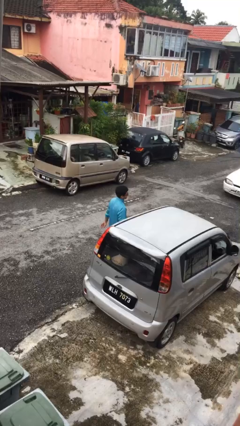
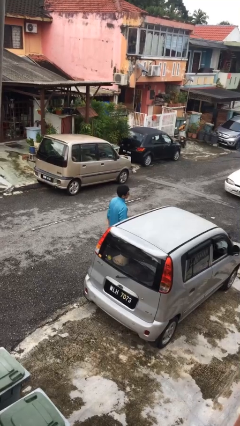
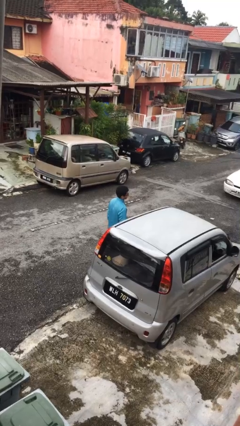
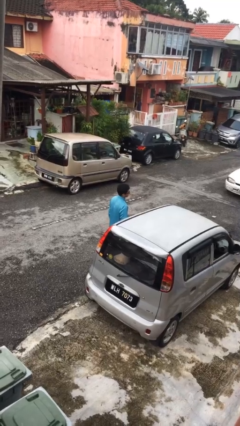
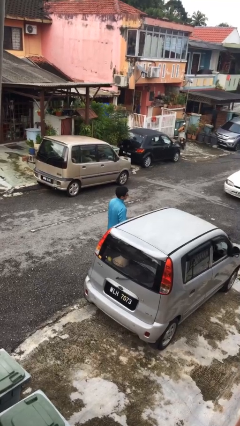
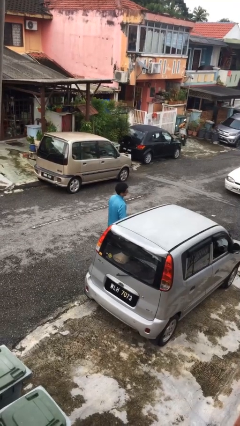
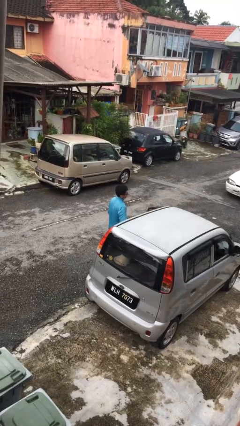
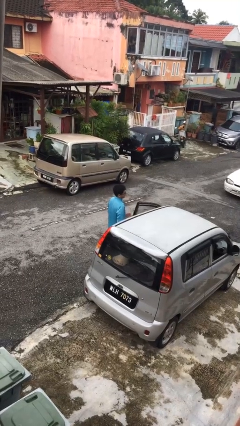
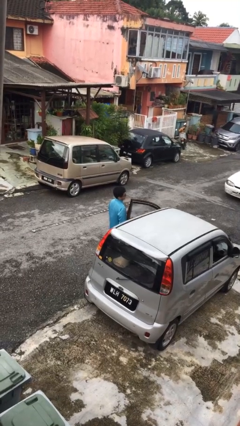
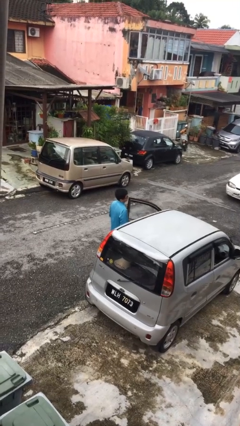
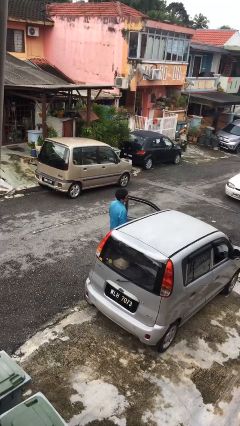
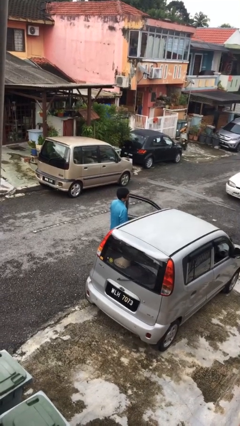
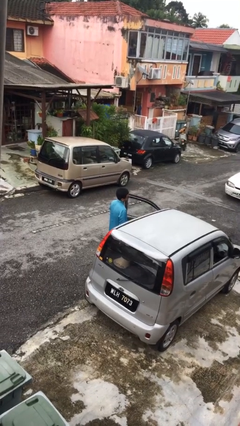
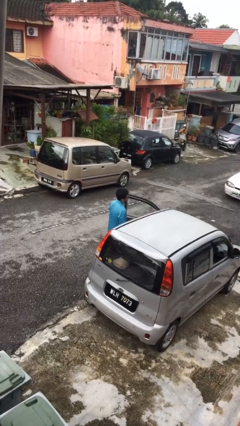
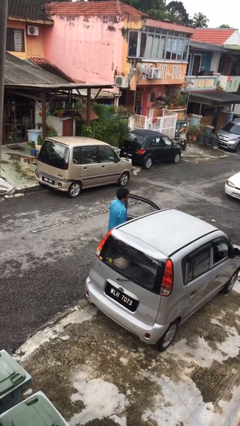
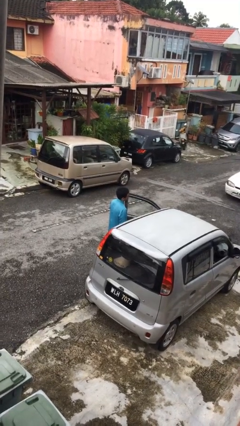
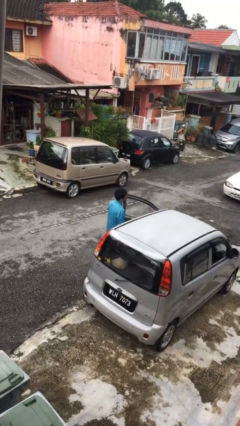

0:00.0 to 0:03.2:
person opens car door

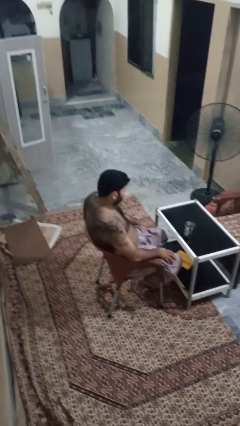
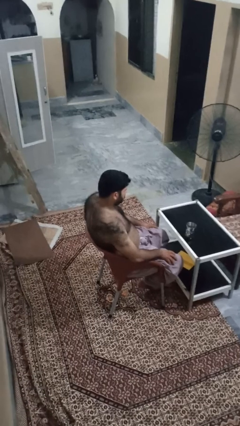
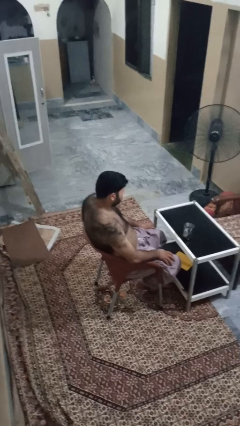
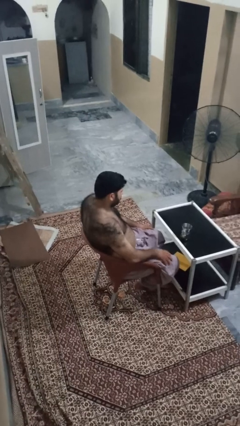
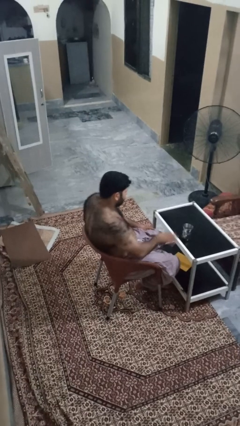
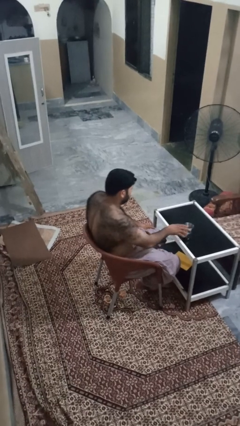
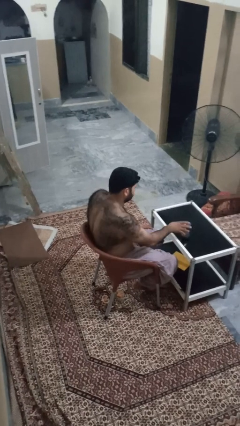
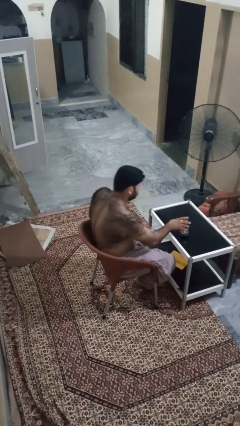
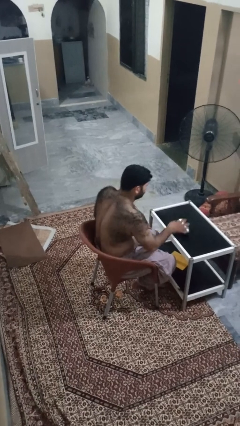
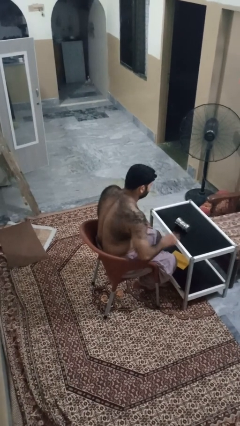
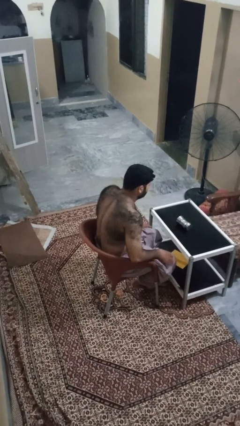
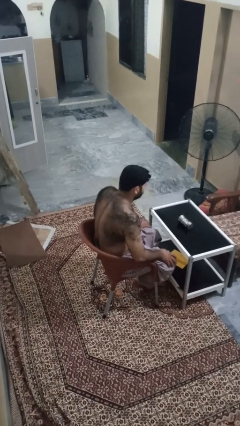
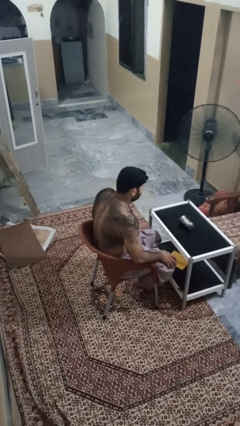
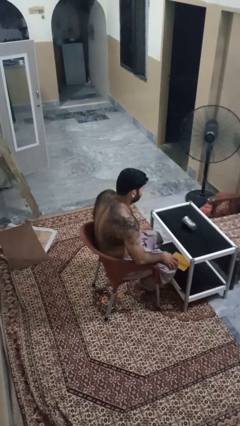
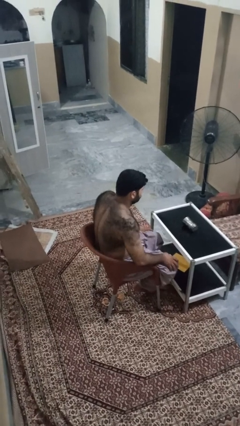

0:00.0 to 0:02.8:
person knocks over glass

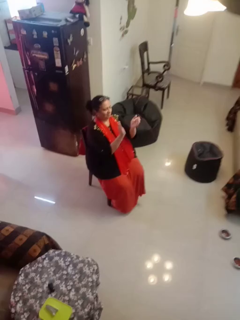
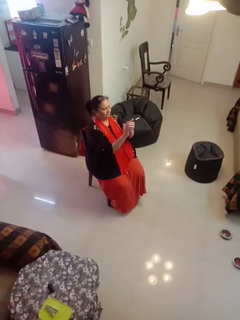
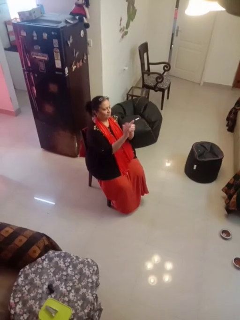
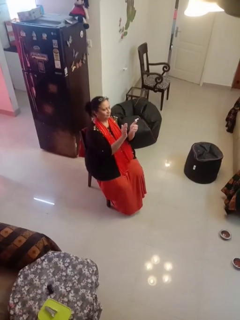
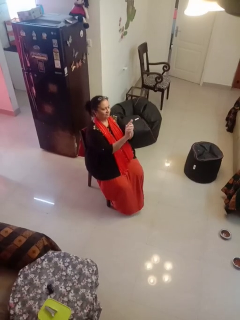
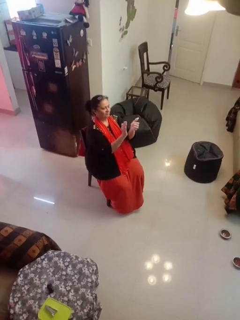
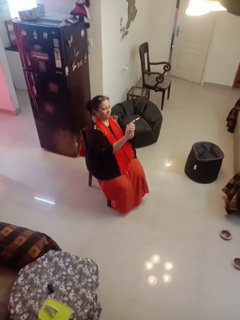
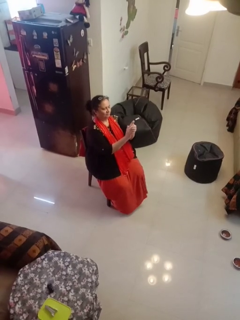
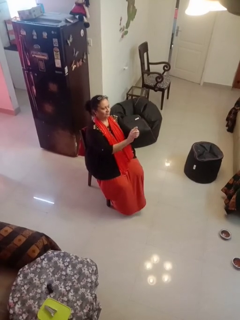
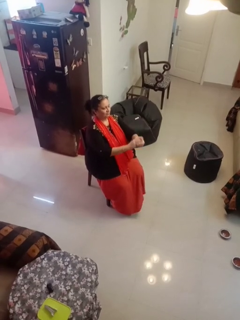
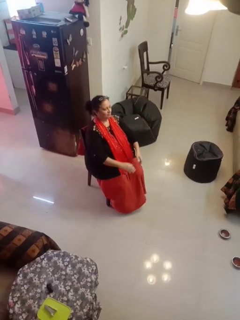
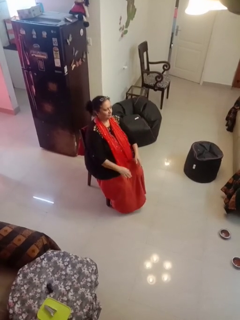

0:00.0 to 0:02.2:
person claps hands

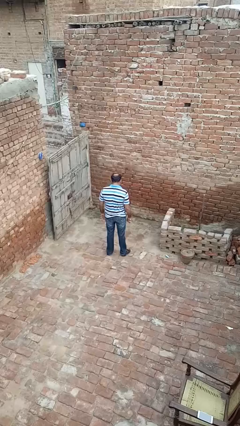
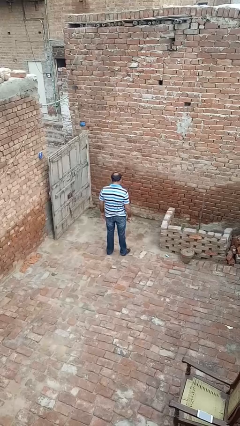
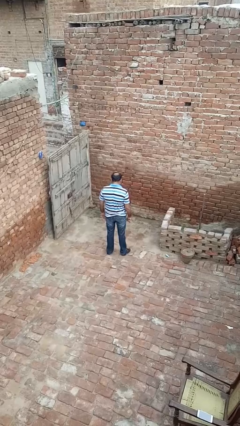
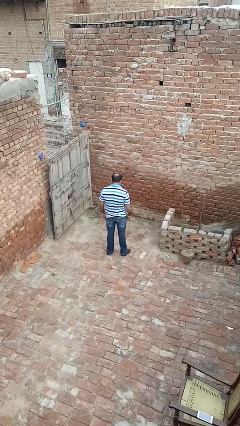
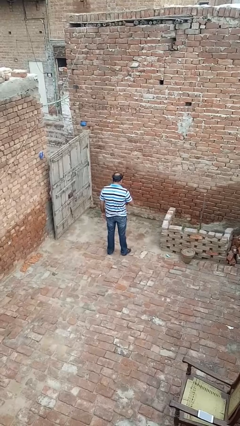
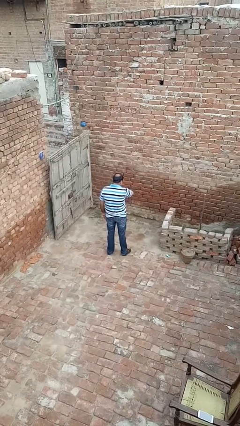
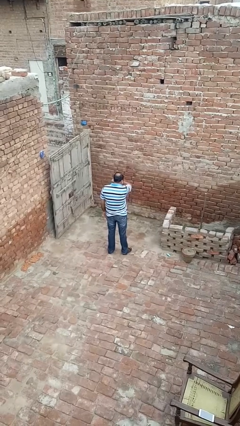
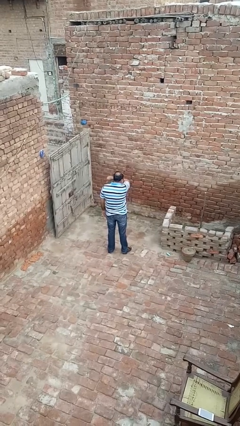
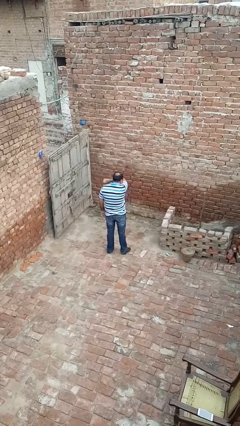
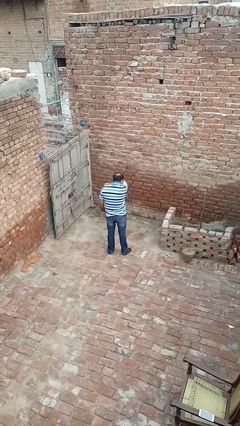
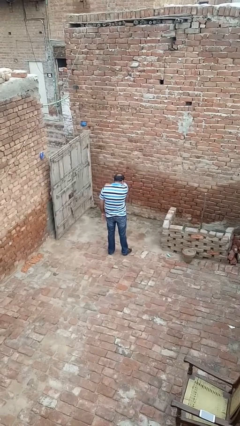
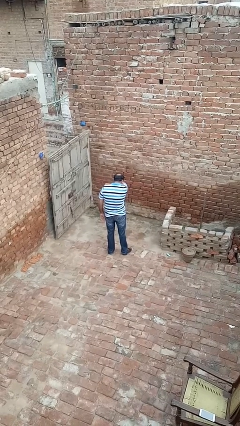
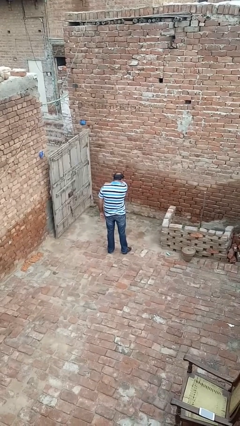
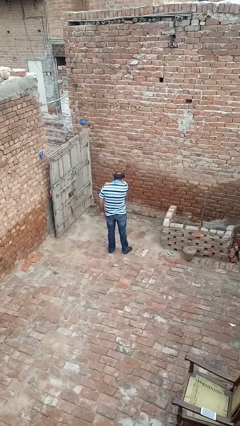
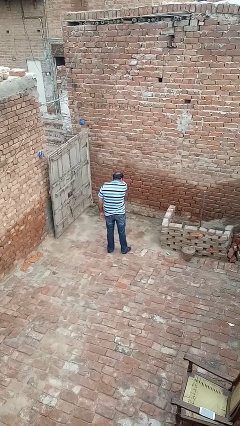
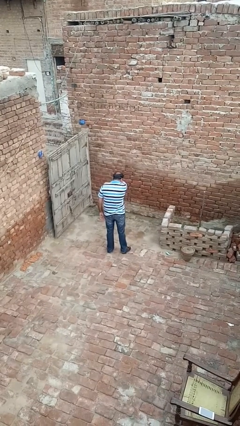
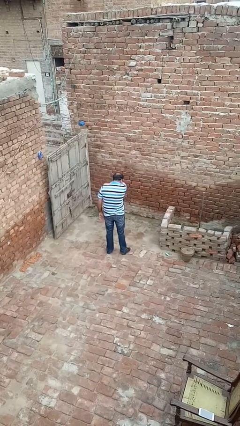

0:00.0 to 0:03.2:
person sneezes into arm

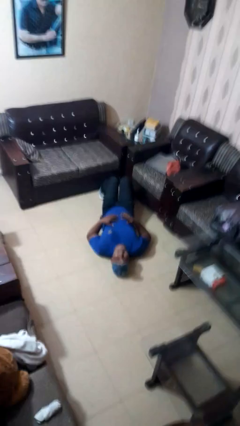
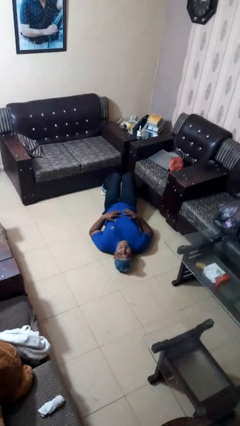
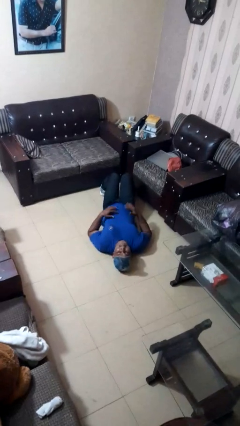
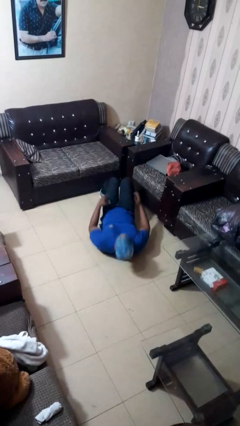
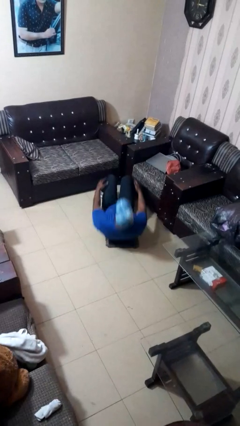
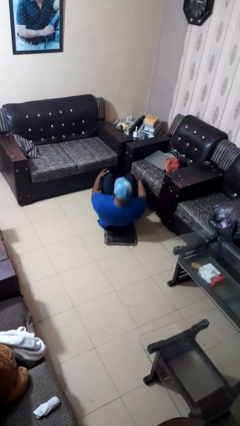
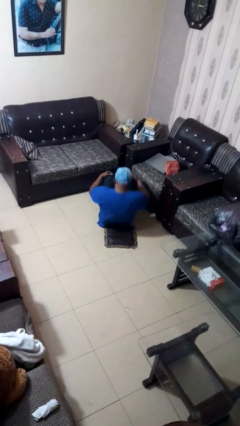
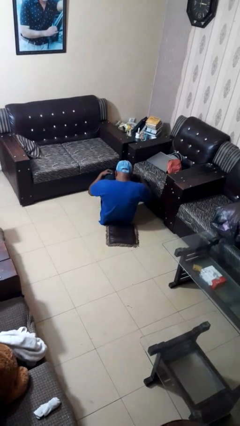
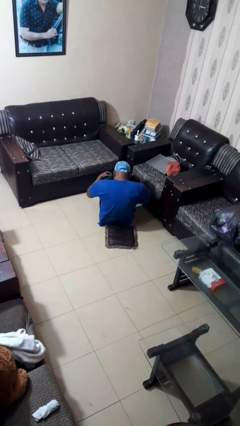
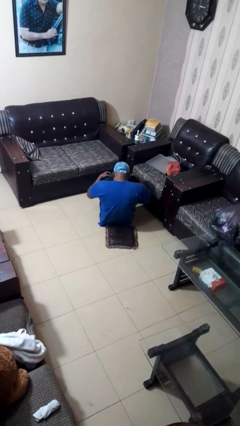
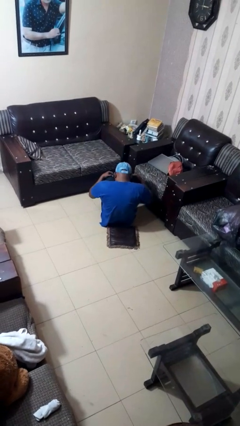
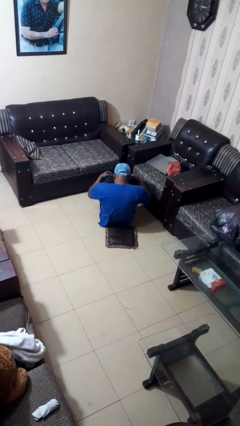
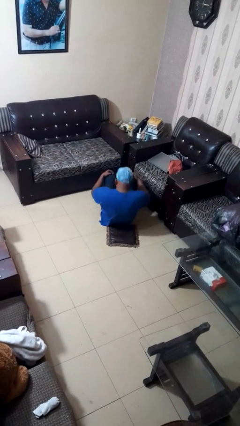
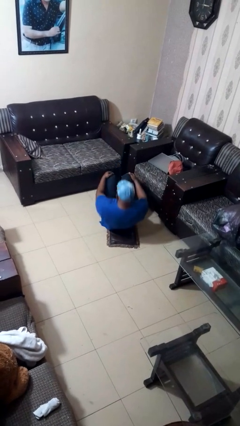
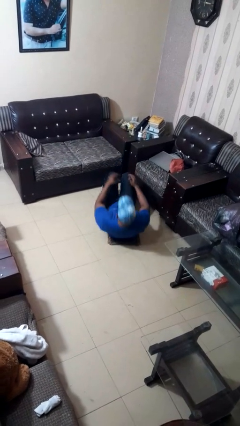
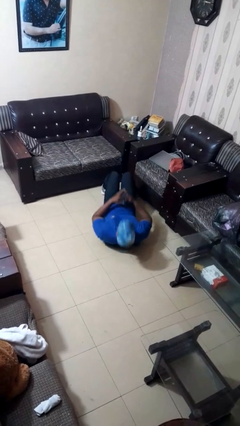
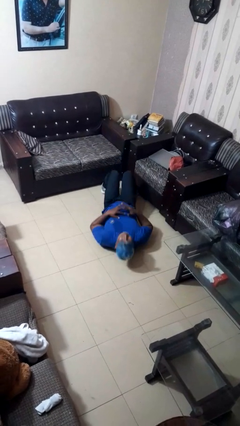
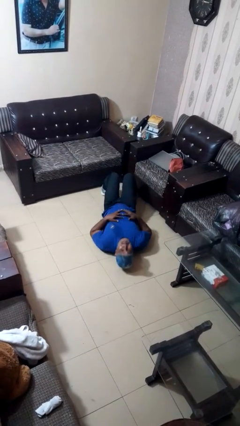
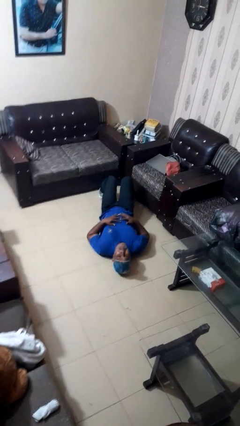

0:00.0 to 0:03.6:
person exercises with situp

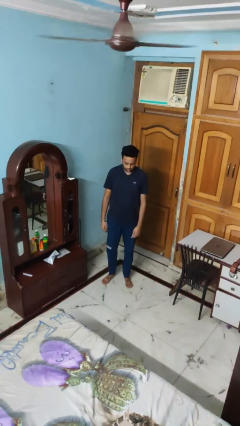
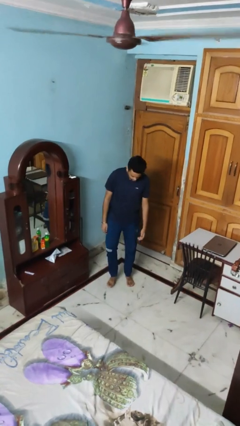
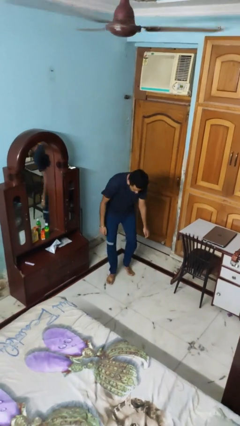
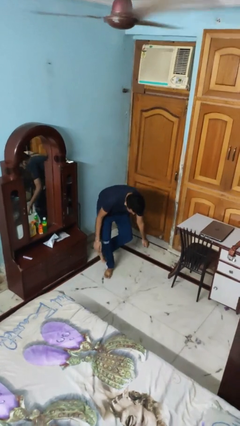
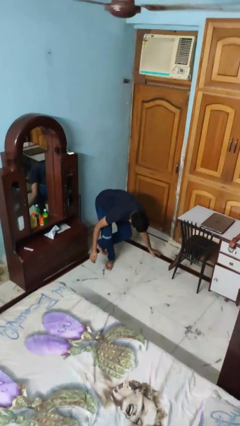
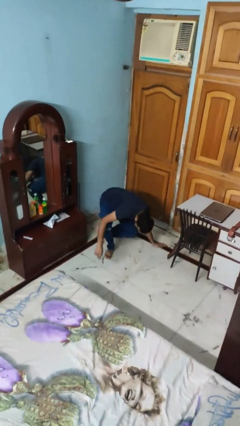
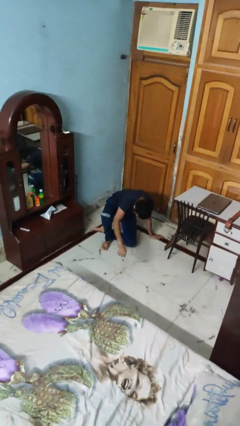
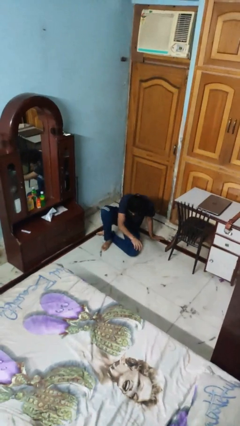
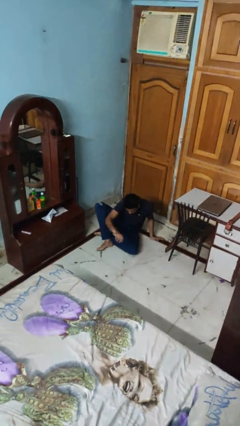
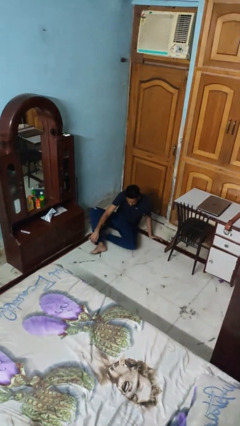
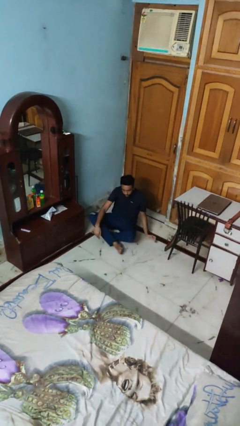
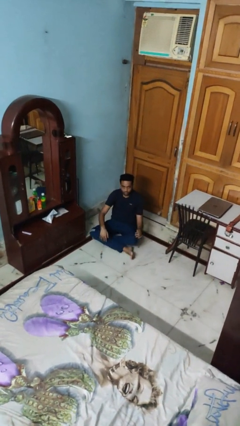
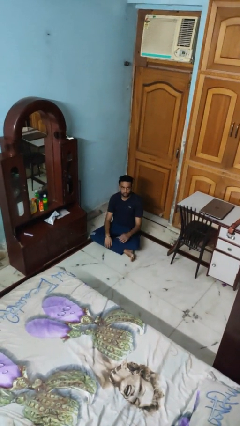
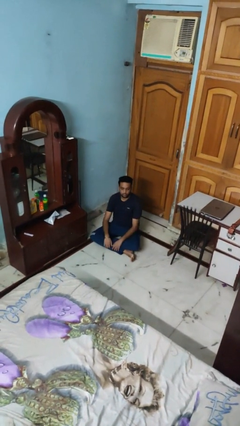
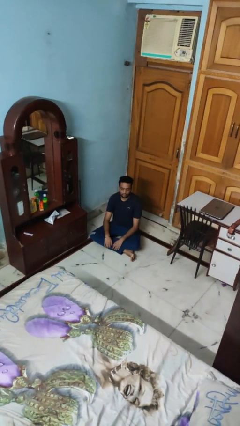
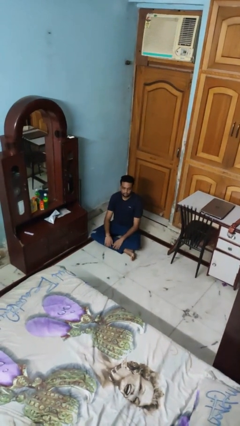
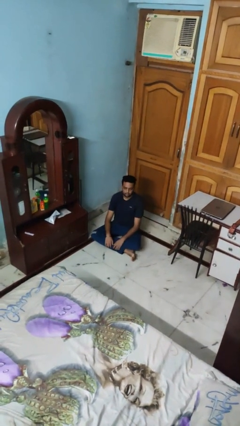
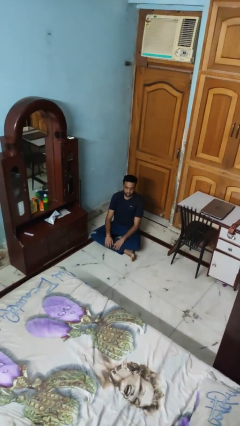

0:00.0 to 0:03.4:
person sits crisscross
